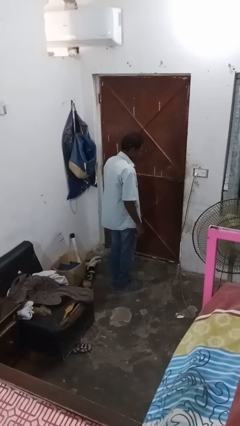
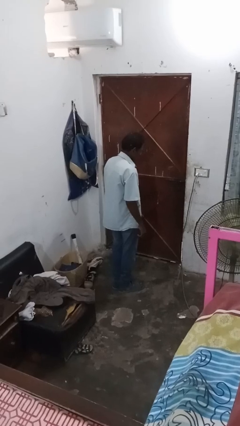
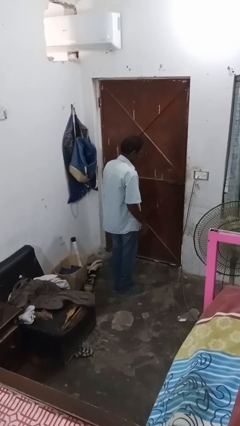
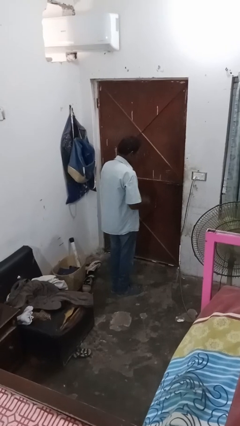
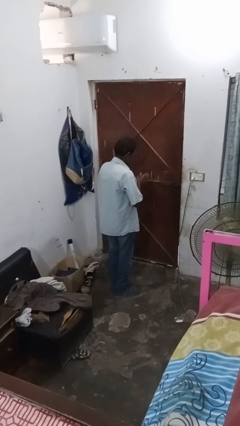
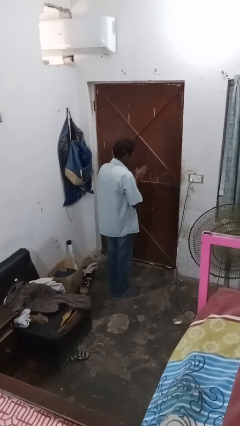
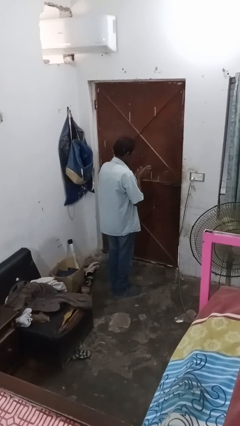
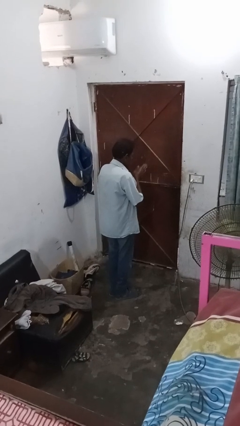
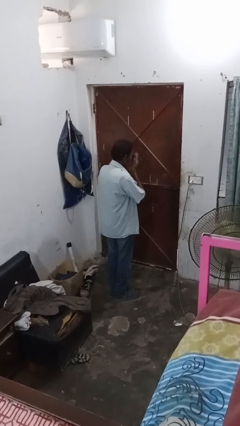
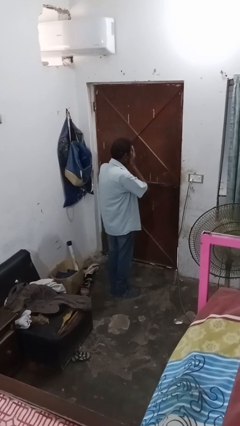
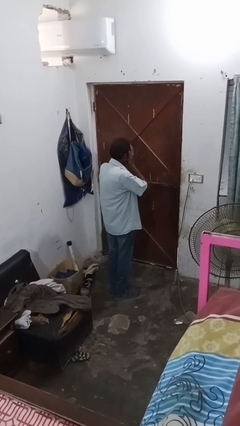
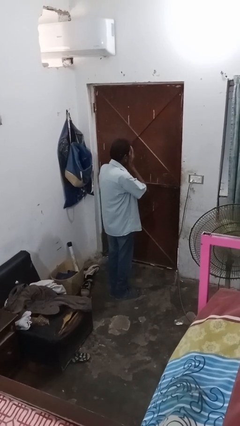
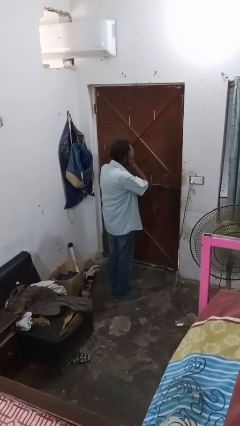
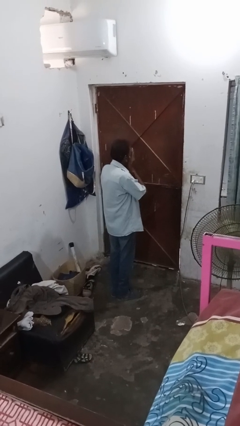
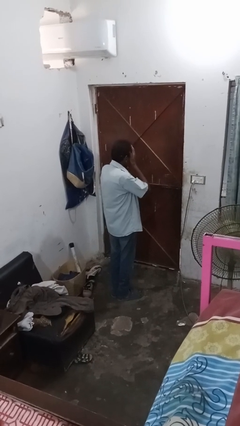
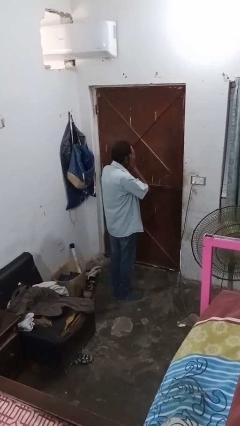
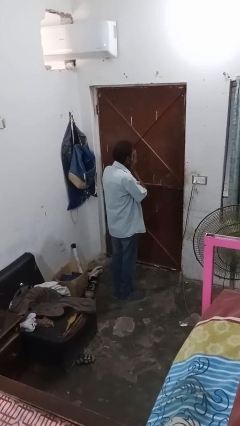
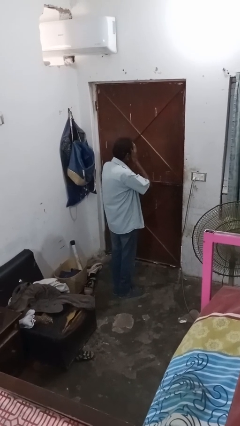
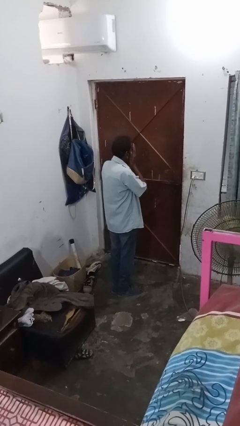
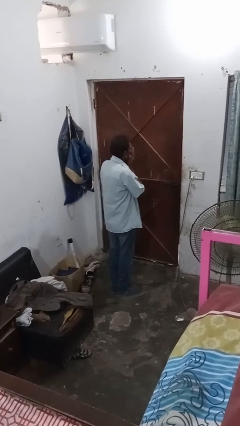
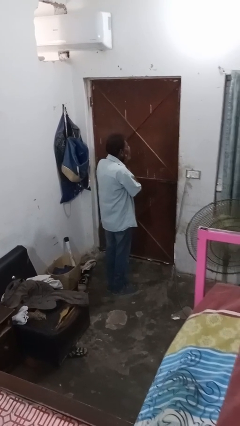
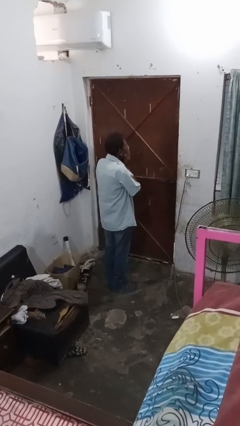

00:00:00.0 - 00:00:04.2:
person applies facial moisturizer

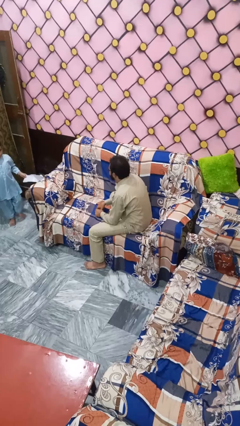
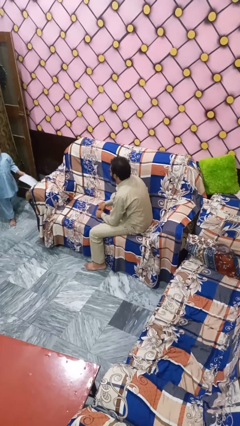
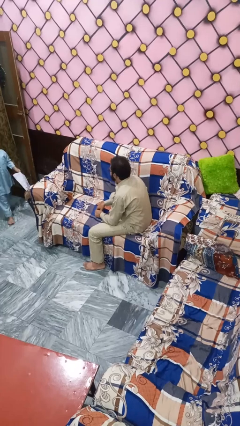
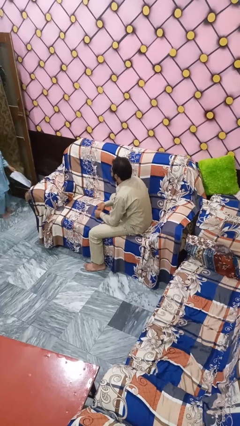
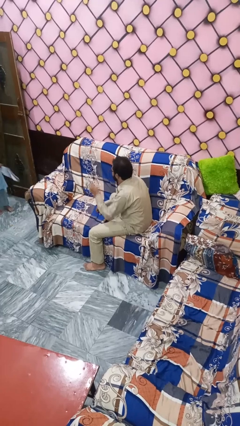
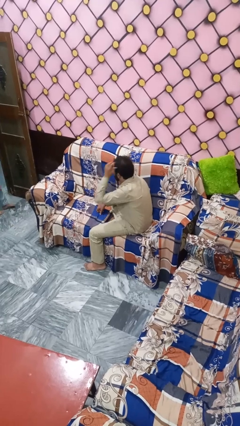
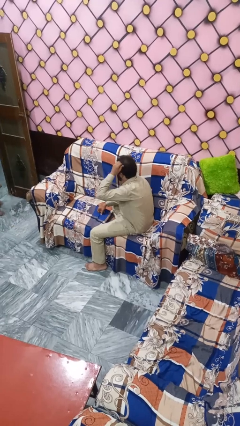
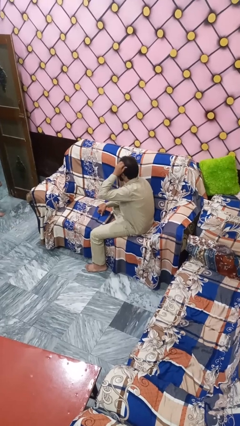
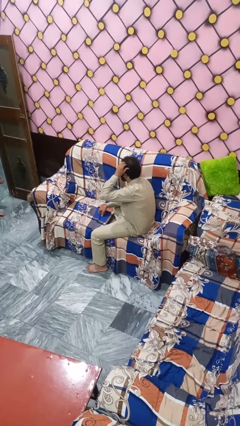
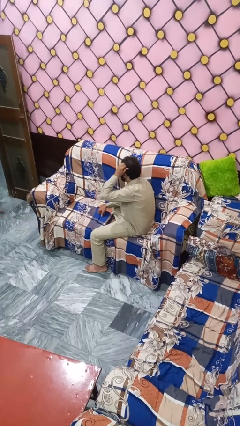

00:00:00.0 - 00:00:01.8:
person strokes hair

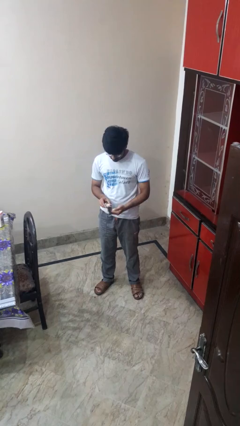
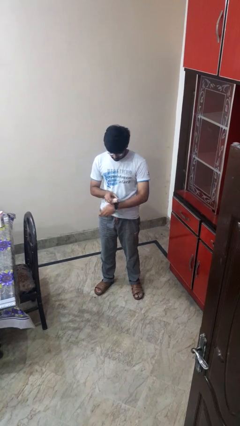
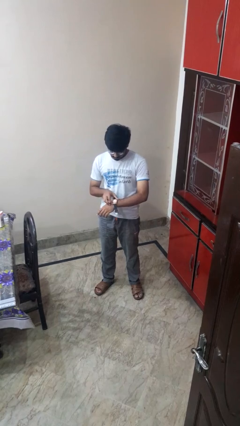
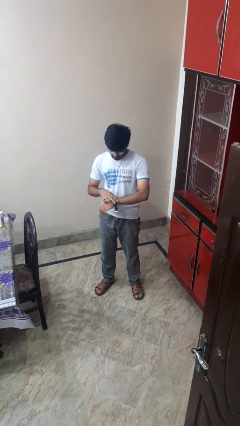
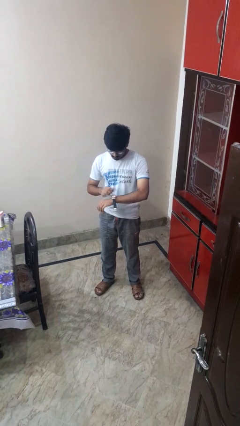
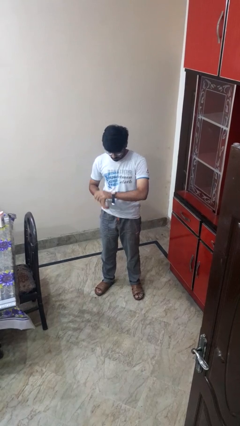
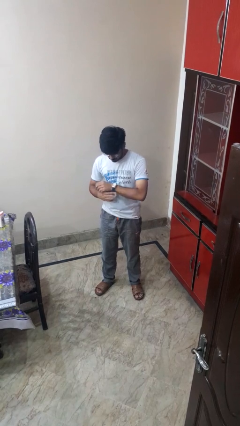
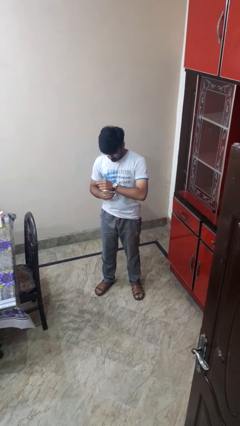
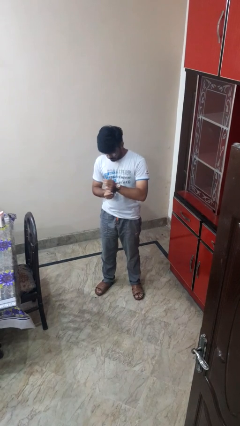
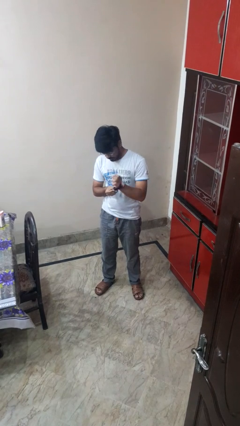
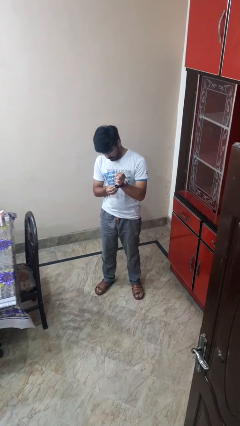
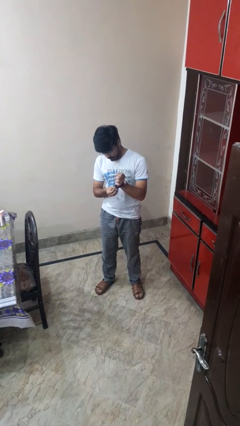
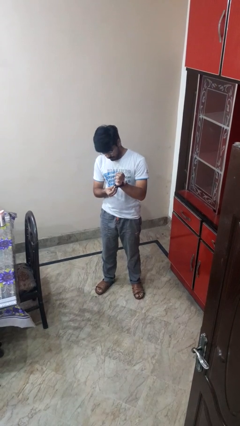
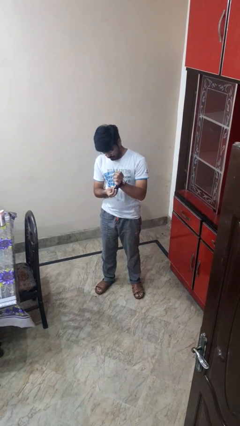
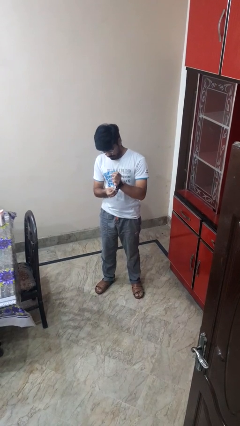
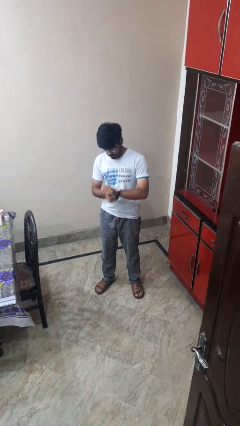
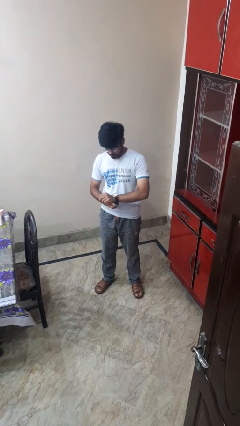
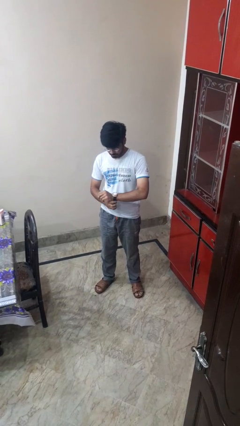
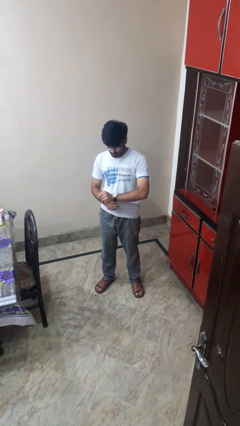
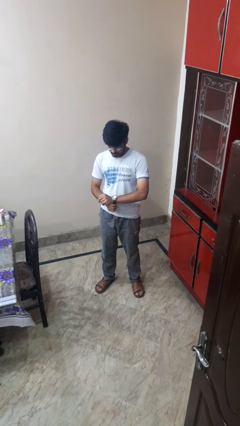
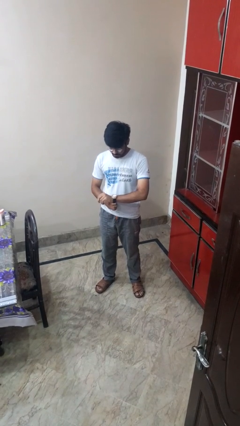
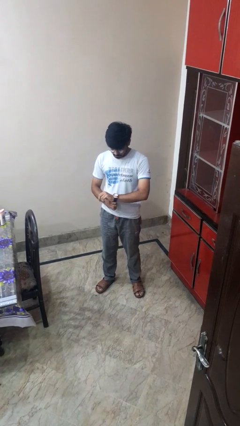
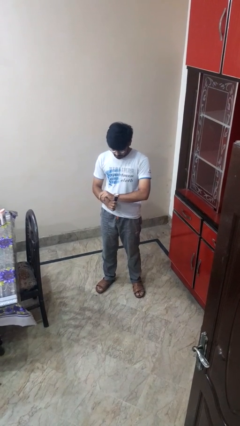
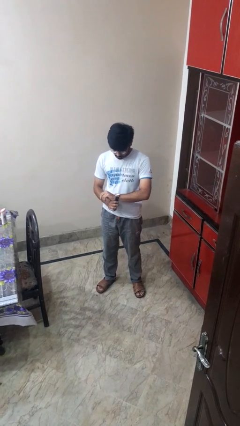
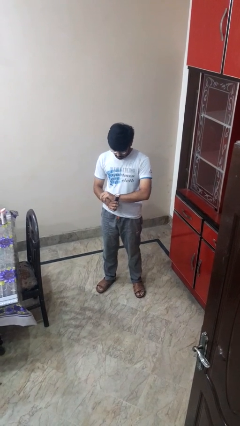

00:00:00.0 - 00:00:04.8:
person puts on wristwatch

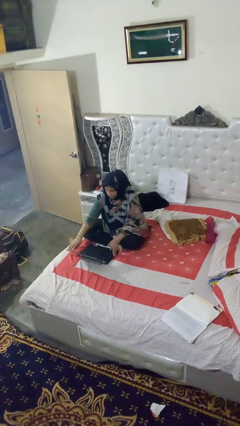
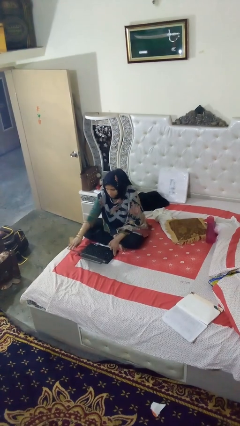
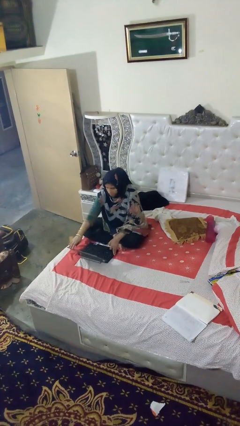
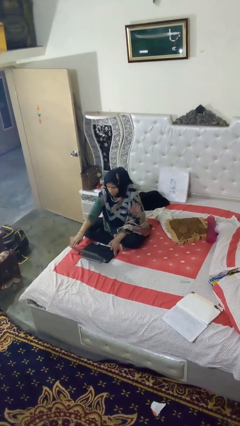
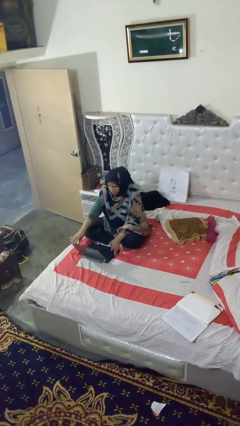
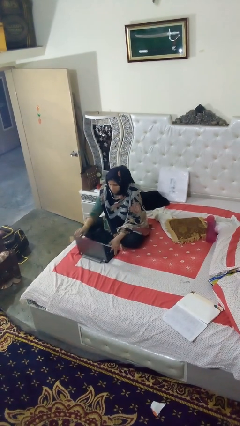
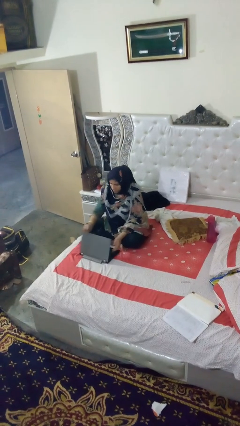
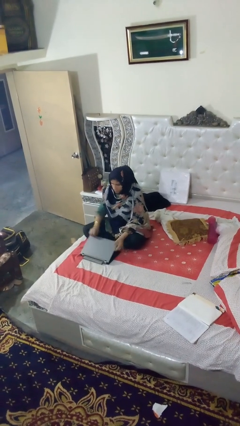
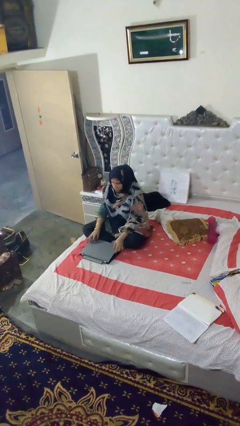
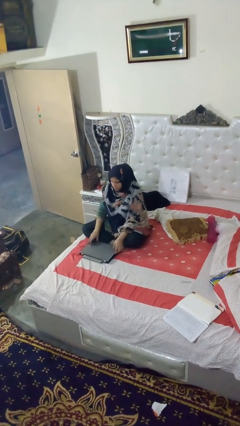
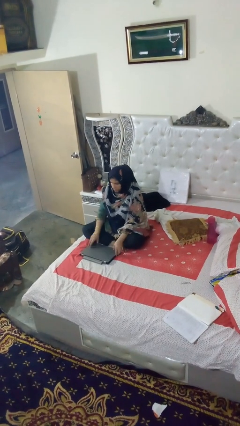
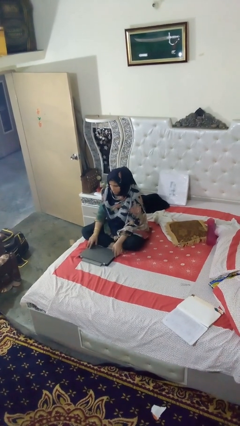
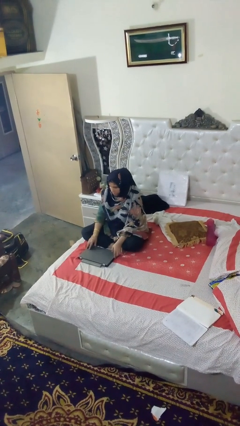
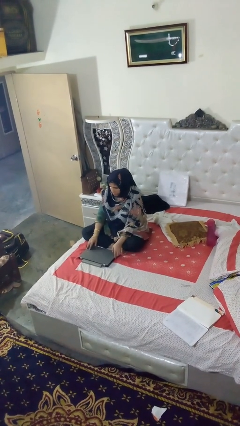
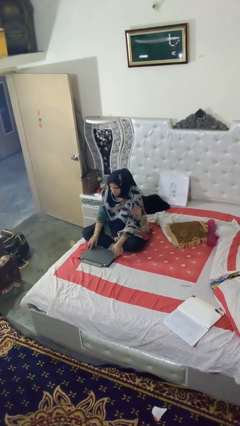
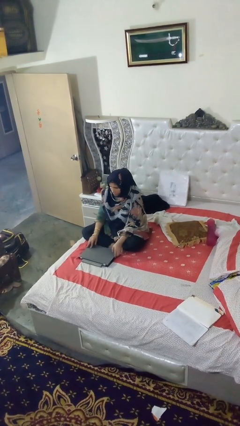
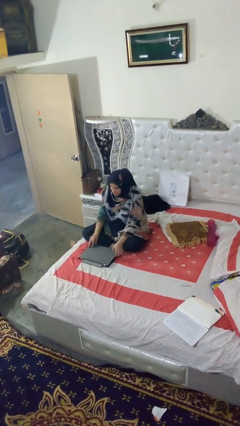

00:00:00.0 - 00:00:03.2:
person closes laptop

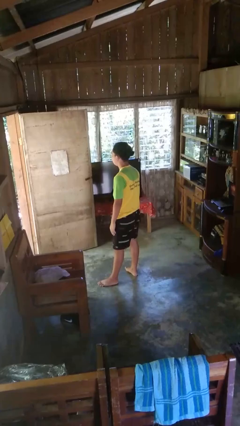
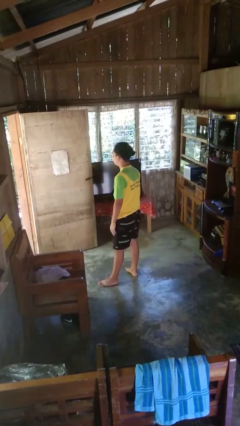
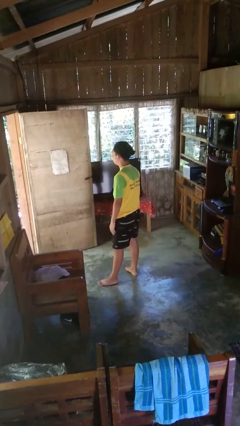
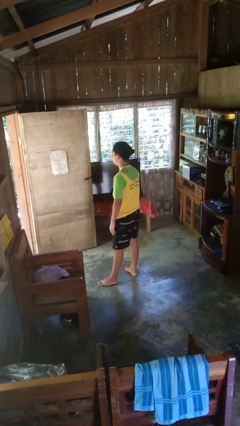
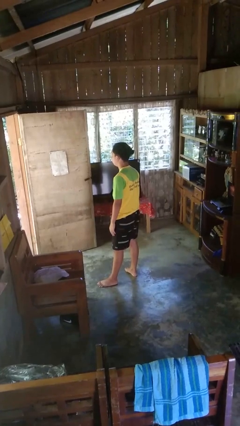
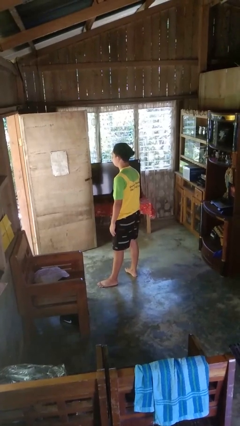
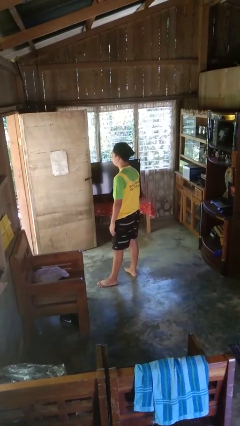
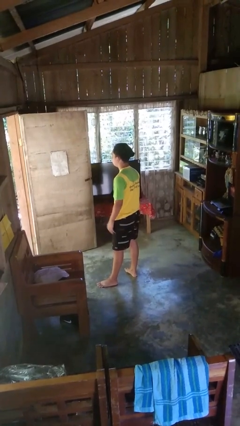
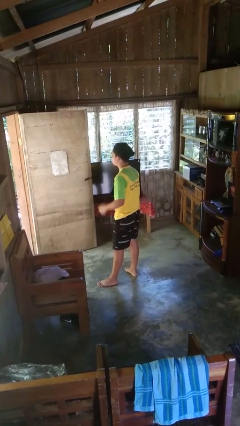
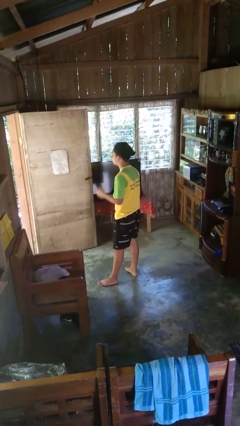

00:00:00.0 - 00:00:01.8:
person yawns

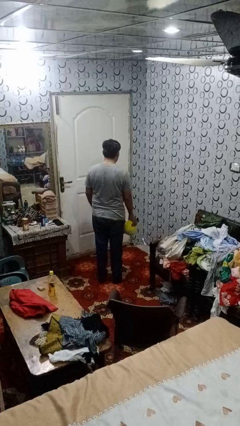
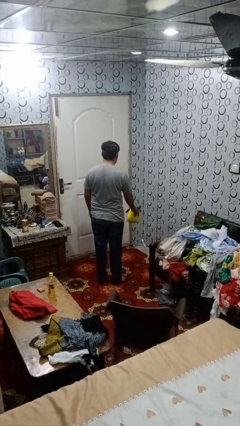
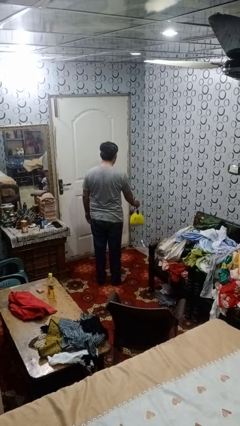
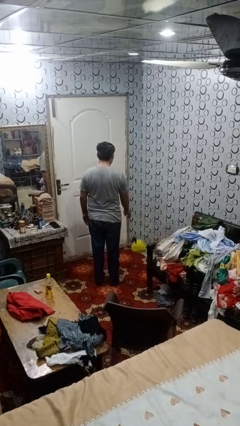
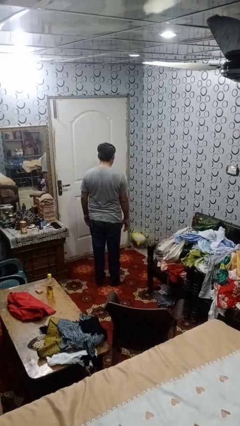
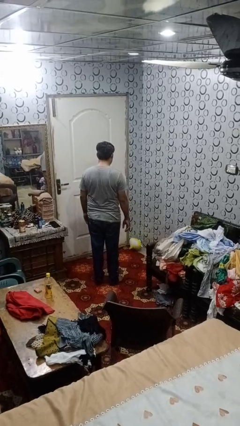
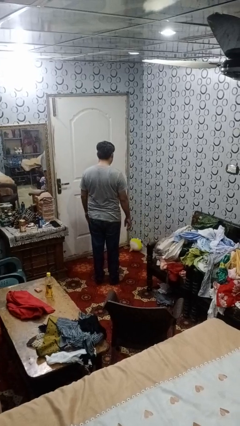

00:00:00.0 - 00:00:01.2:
person throws object to ground

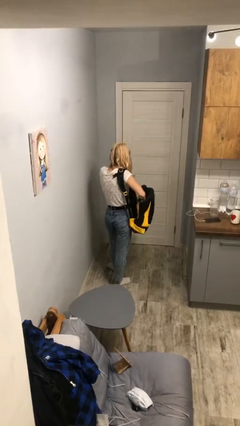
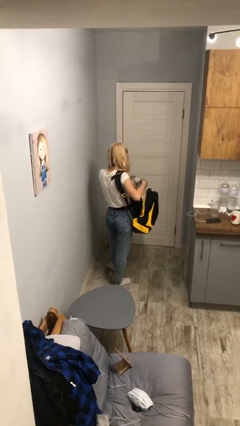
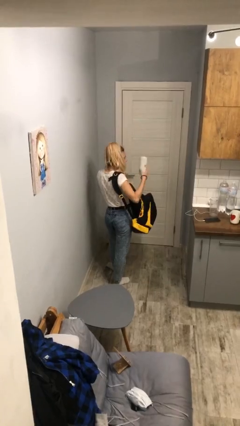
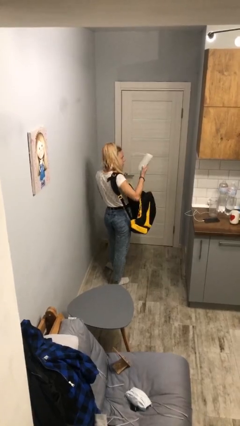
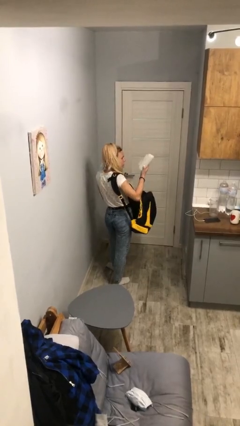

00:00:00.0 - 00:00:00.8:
person takes object from backpack
